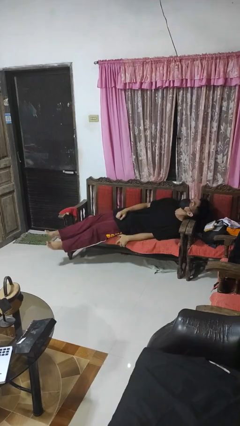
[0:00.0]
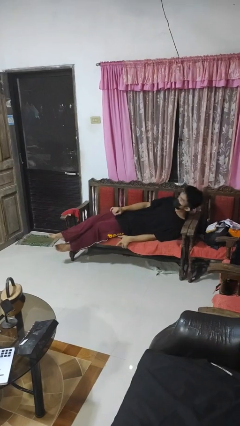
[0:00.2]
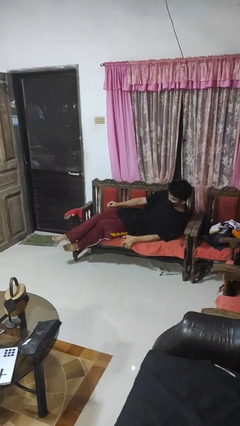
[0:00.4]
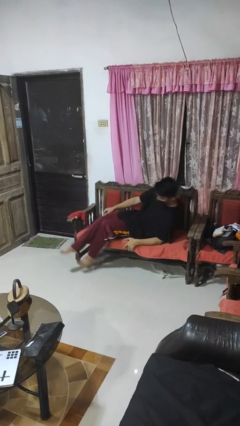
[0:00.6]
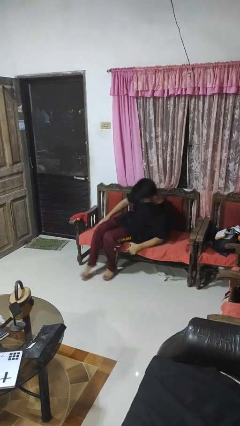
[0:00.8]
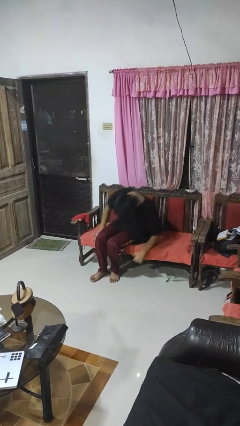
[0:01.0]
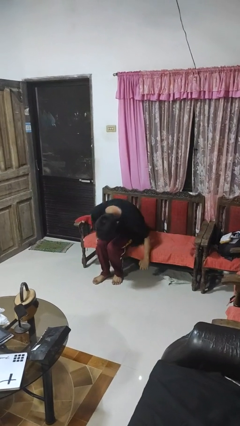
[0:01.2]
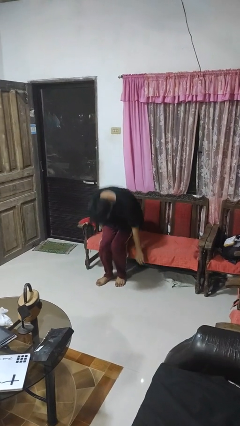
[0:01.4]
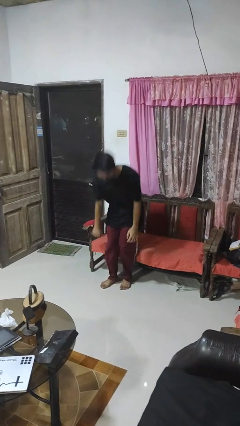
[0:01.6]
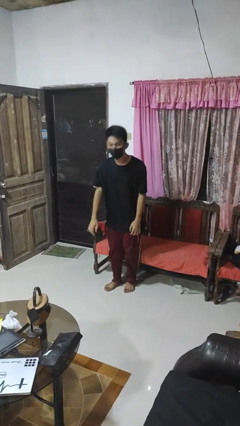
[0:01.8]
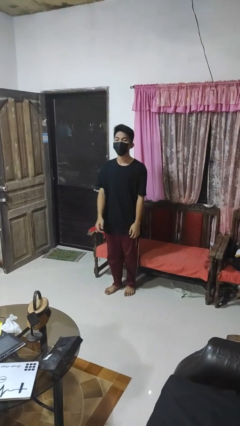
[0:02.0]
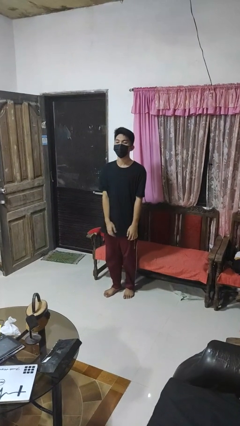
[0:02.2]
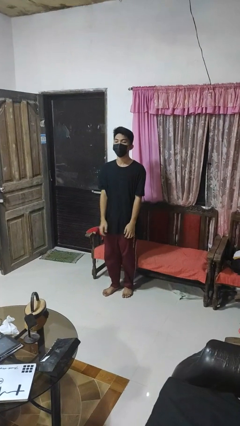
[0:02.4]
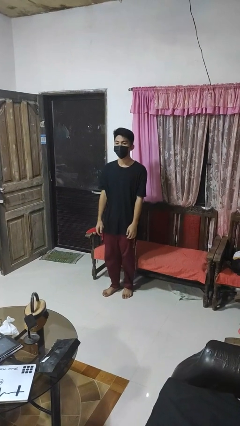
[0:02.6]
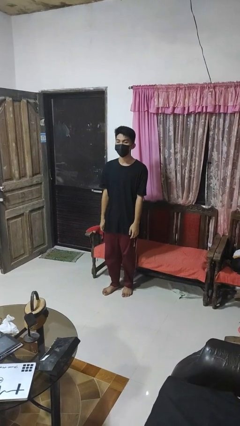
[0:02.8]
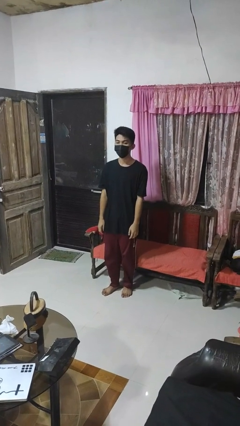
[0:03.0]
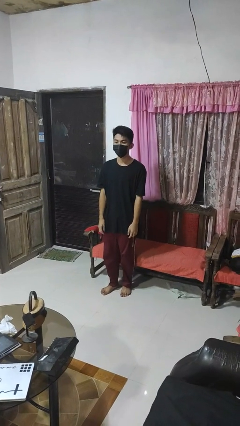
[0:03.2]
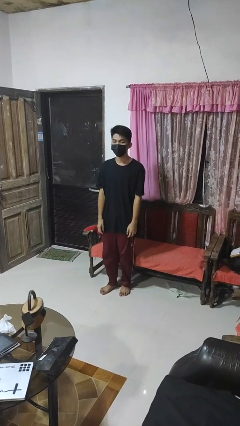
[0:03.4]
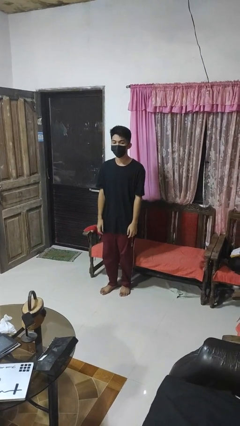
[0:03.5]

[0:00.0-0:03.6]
person stands up

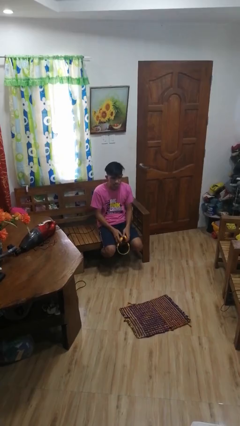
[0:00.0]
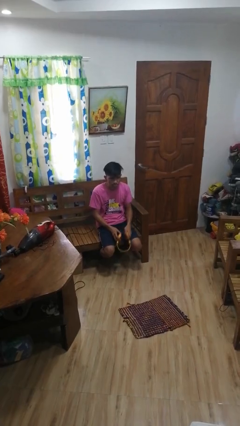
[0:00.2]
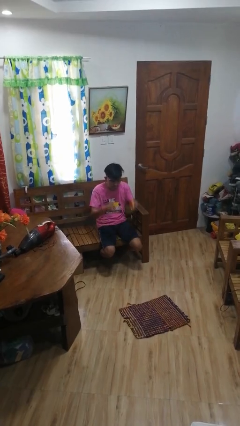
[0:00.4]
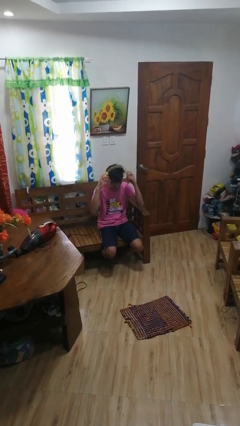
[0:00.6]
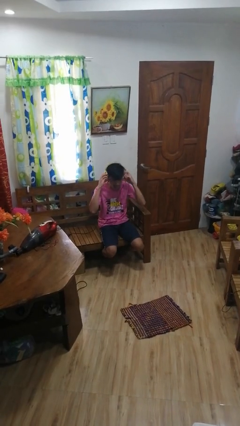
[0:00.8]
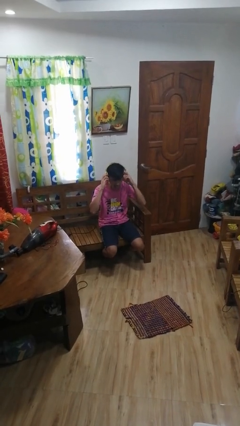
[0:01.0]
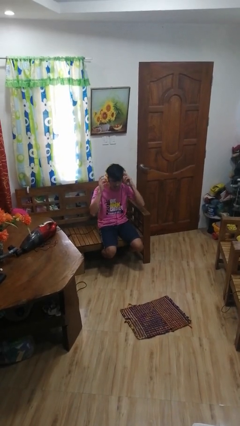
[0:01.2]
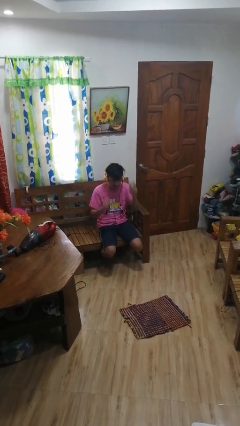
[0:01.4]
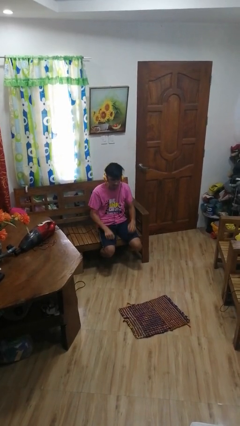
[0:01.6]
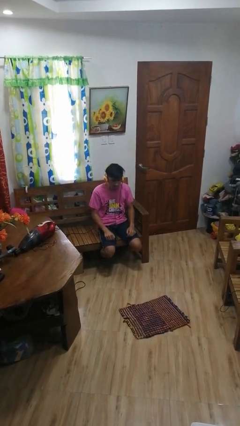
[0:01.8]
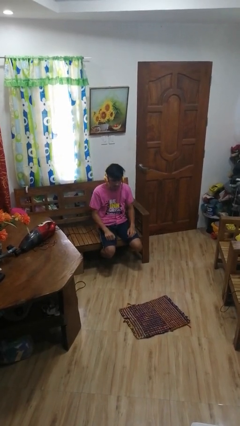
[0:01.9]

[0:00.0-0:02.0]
person puts on headphones

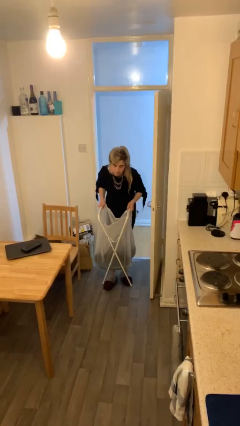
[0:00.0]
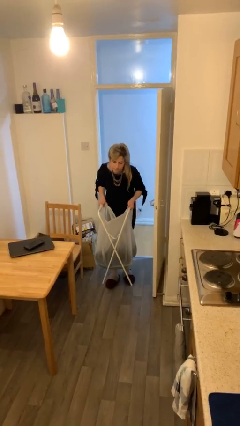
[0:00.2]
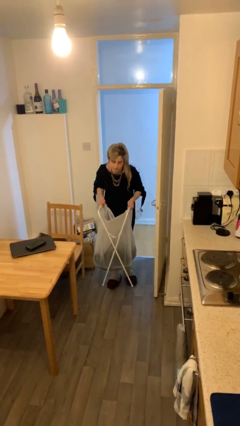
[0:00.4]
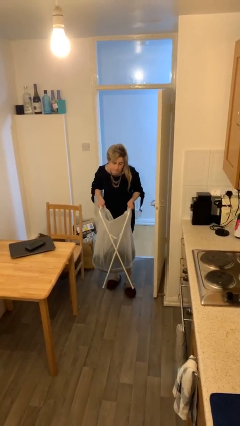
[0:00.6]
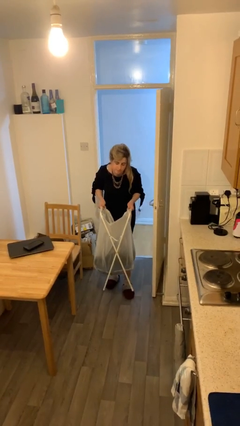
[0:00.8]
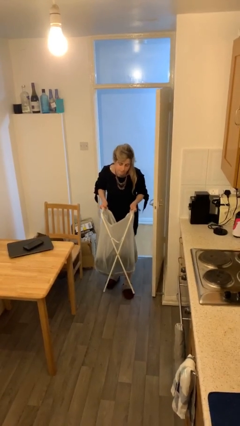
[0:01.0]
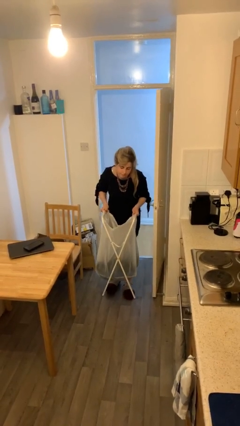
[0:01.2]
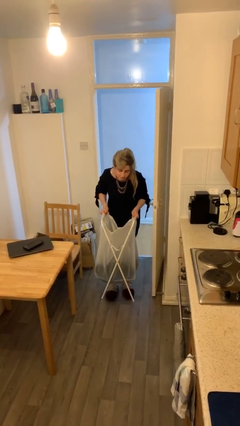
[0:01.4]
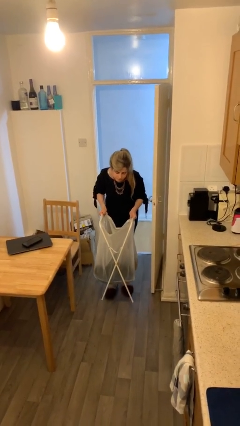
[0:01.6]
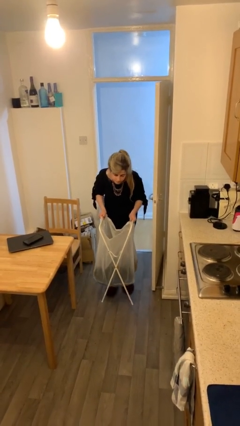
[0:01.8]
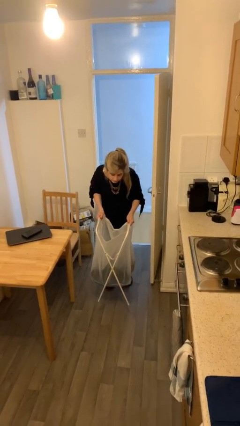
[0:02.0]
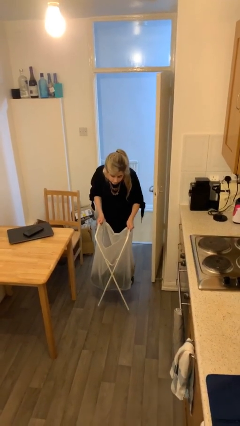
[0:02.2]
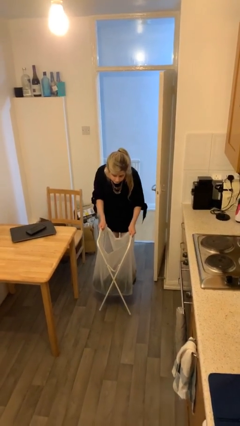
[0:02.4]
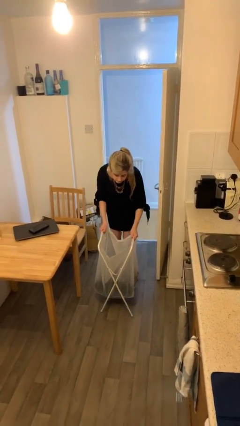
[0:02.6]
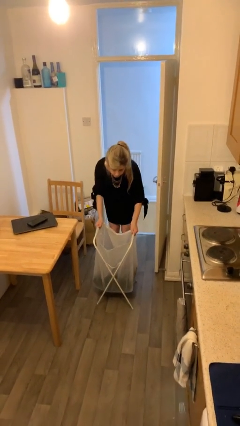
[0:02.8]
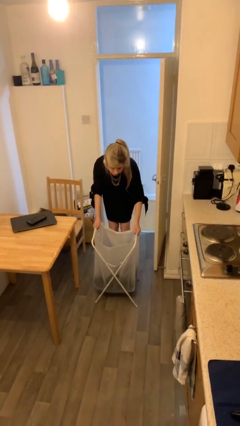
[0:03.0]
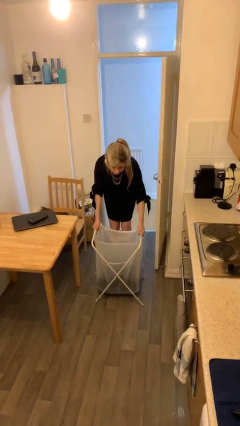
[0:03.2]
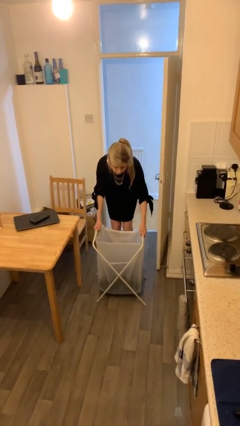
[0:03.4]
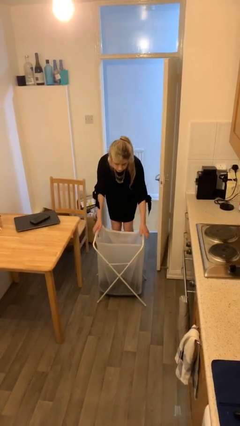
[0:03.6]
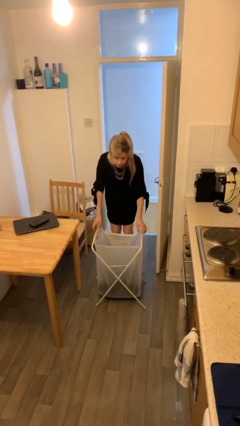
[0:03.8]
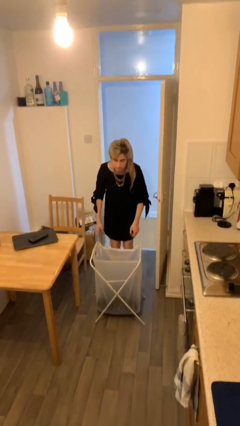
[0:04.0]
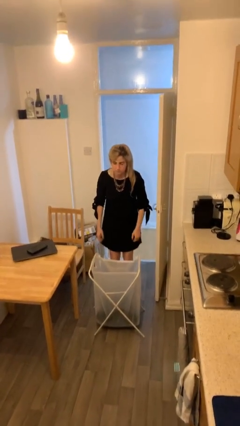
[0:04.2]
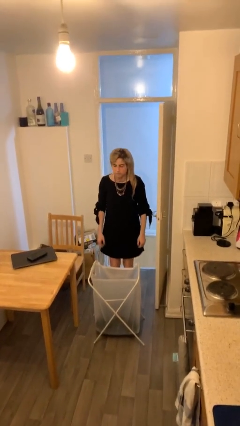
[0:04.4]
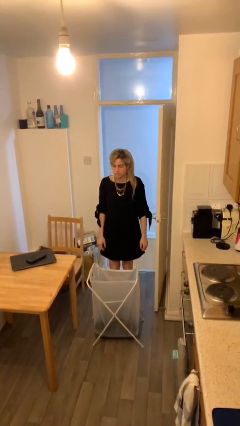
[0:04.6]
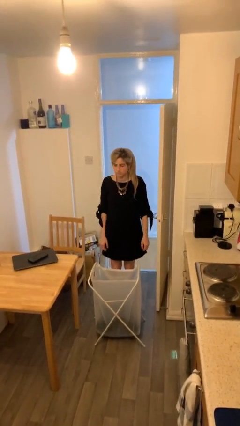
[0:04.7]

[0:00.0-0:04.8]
person puts down object on floor

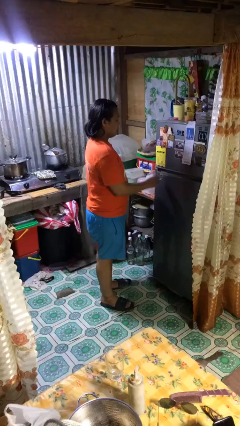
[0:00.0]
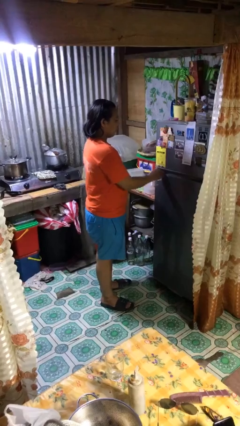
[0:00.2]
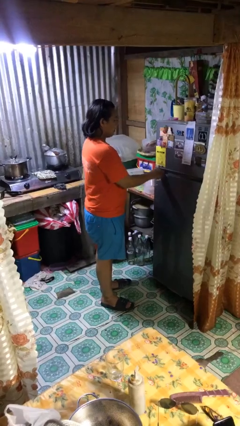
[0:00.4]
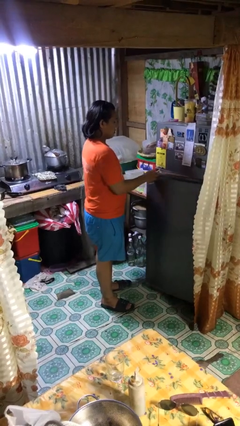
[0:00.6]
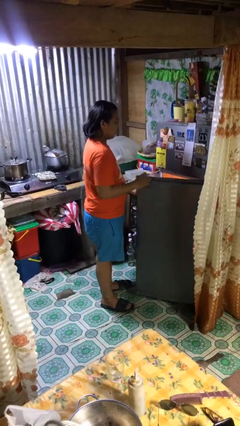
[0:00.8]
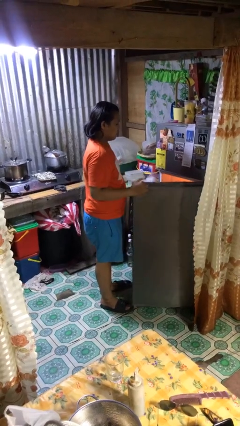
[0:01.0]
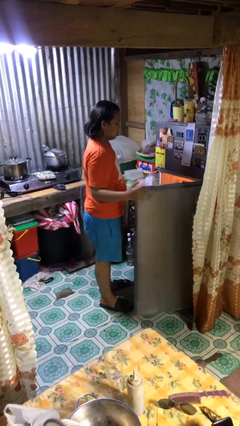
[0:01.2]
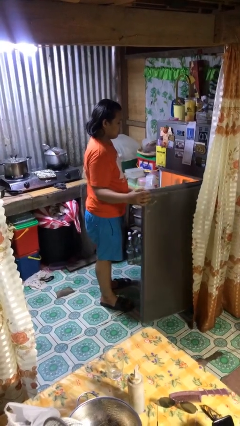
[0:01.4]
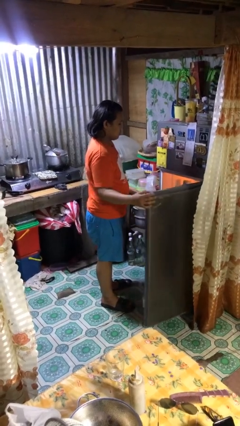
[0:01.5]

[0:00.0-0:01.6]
person opens refrigerator

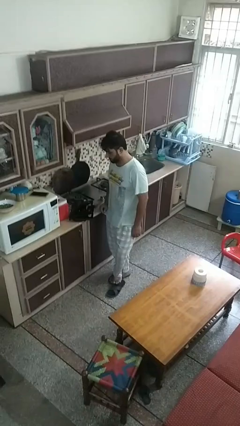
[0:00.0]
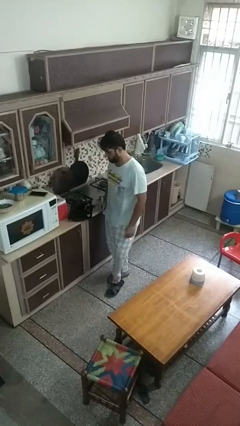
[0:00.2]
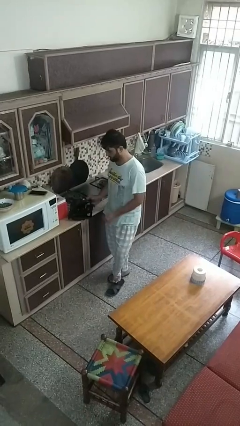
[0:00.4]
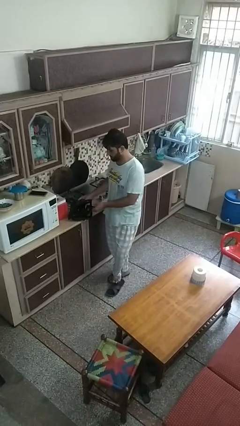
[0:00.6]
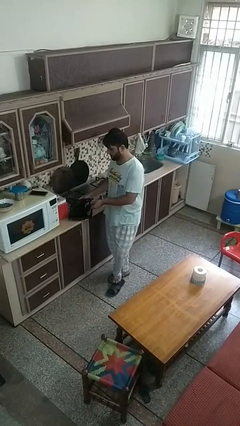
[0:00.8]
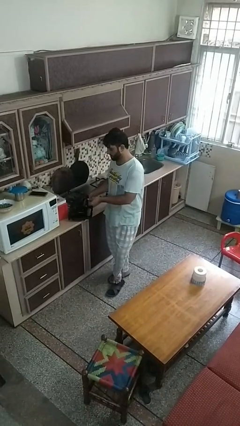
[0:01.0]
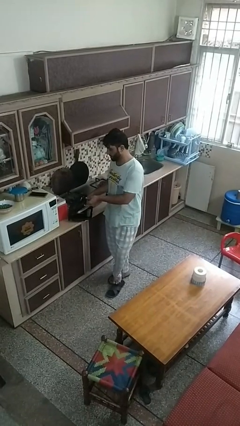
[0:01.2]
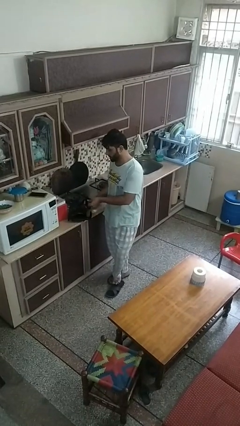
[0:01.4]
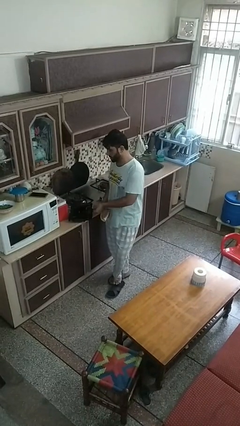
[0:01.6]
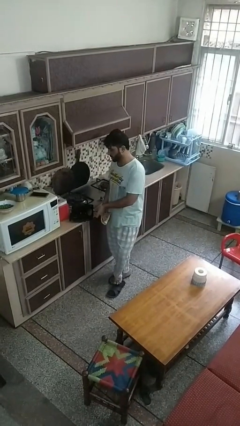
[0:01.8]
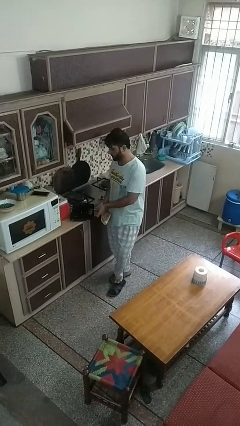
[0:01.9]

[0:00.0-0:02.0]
person takes object from toaster

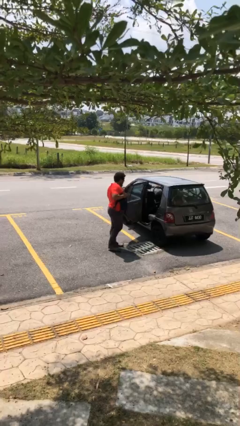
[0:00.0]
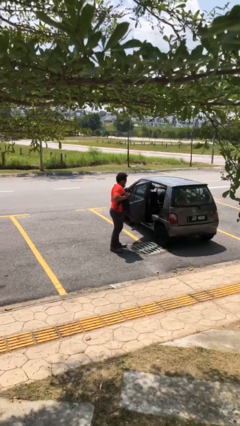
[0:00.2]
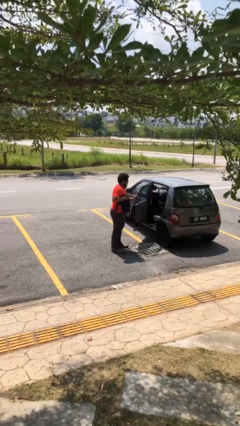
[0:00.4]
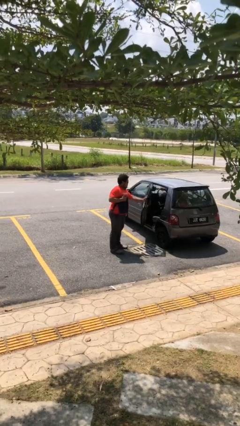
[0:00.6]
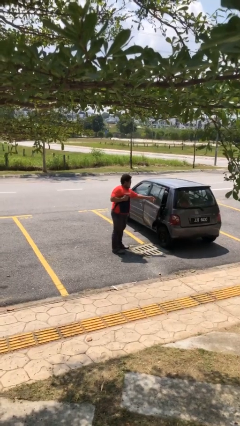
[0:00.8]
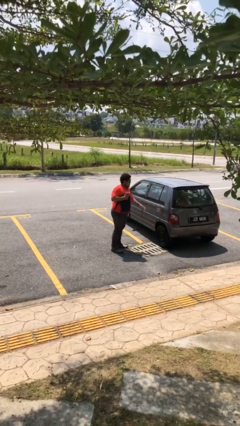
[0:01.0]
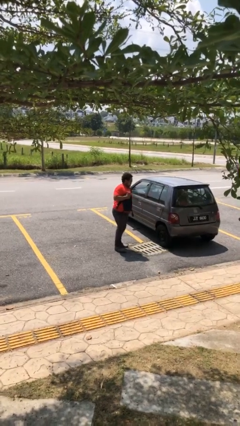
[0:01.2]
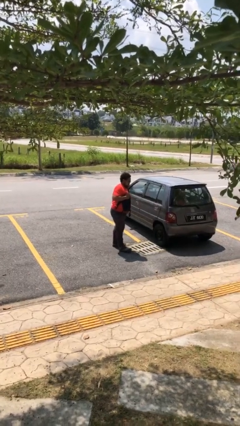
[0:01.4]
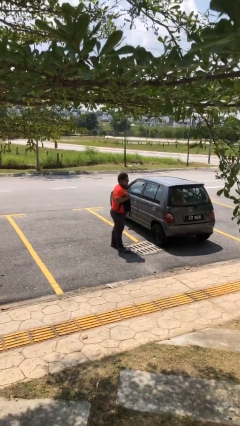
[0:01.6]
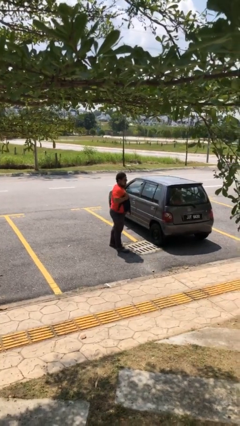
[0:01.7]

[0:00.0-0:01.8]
person closes car door

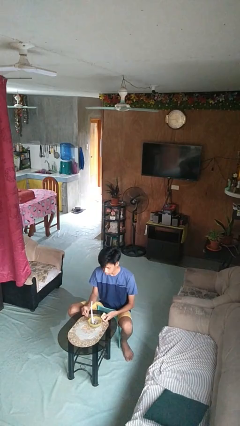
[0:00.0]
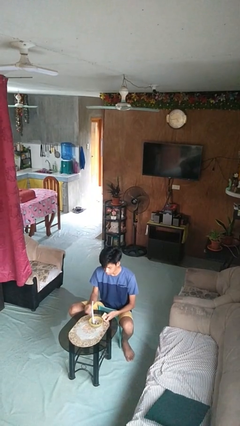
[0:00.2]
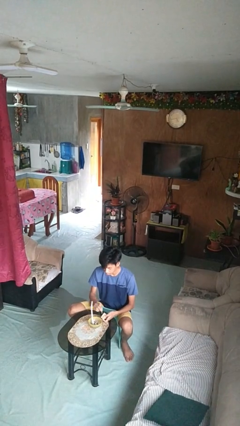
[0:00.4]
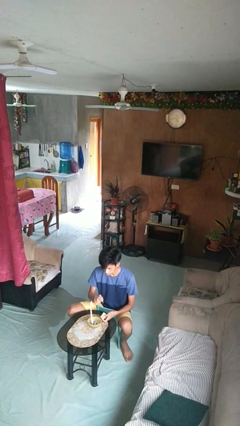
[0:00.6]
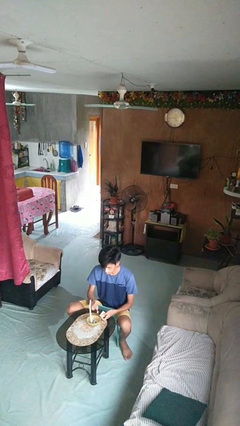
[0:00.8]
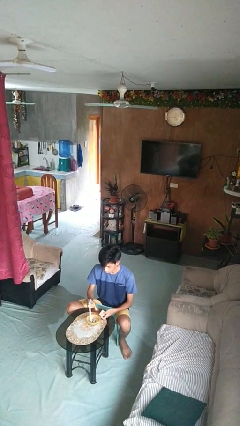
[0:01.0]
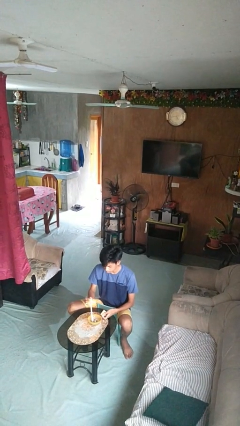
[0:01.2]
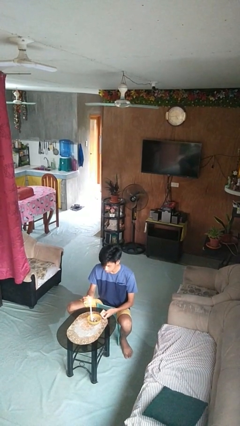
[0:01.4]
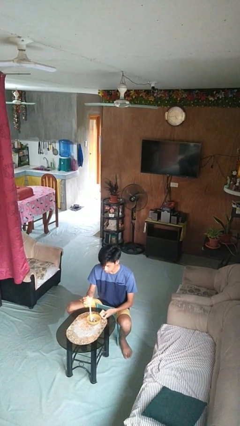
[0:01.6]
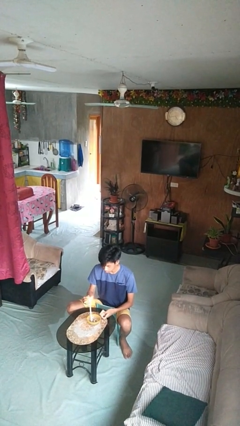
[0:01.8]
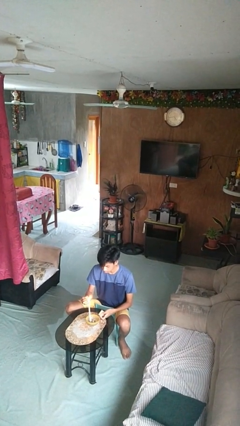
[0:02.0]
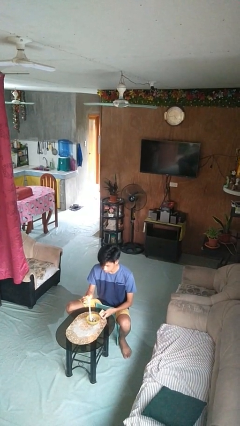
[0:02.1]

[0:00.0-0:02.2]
person lights candle
